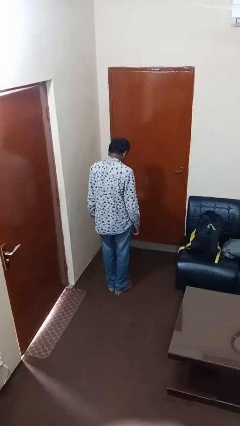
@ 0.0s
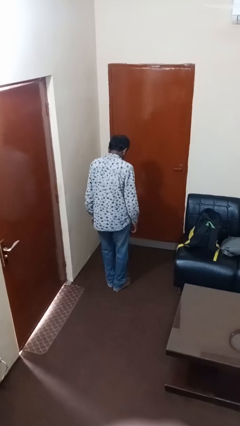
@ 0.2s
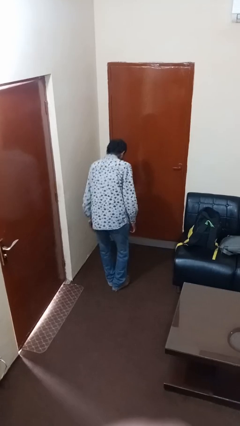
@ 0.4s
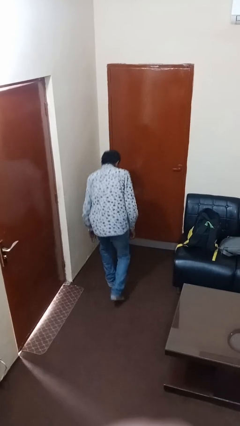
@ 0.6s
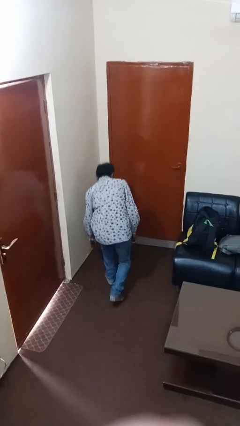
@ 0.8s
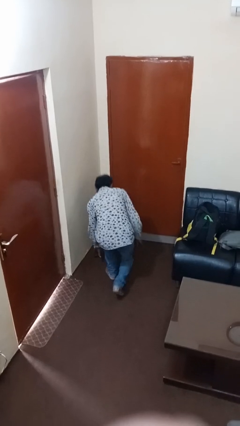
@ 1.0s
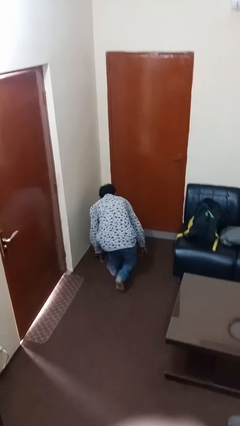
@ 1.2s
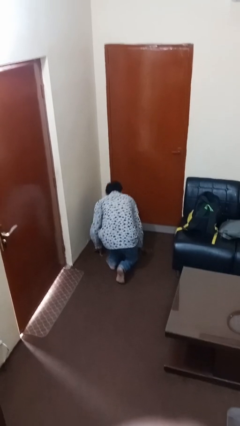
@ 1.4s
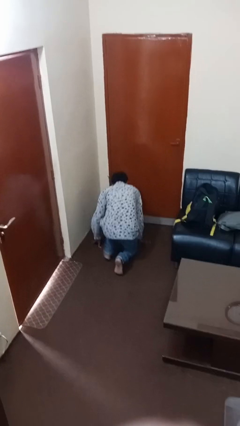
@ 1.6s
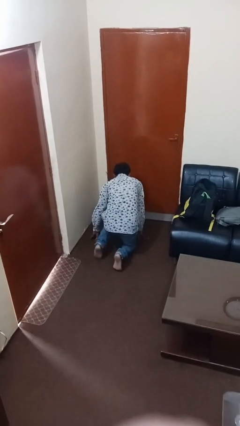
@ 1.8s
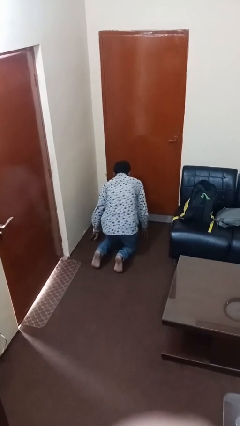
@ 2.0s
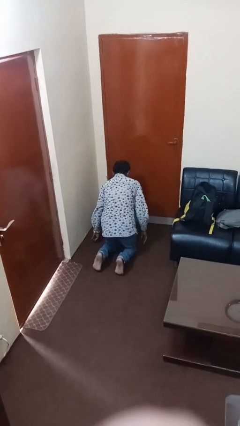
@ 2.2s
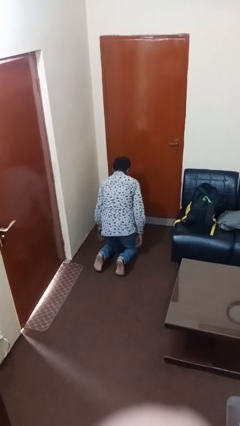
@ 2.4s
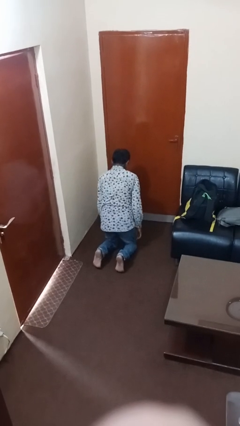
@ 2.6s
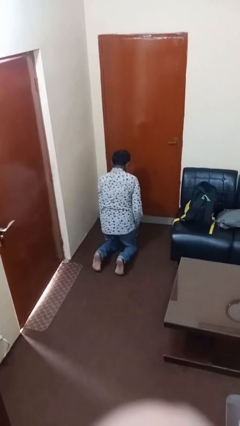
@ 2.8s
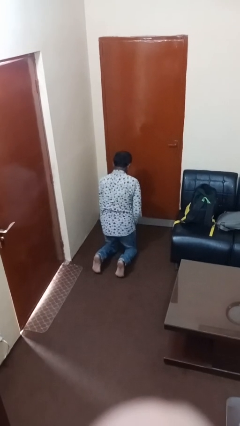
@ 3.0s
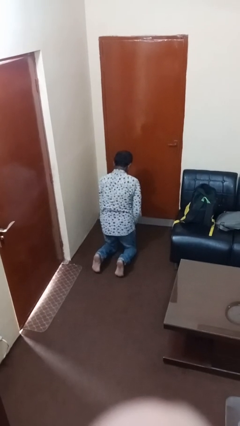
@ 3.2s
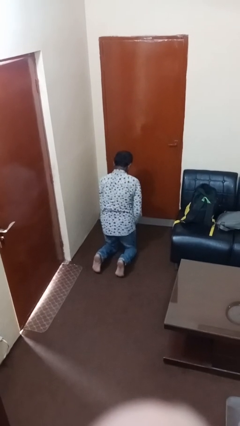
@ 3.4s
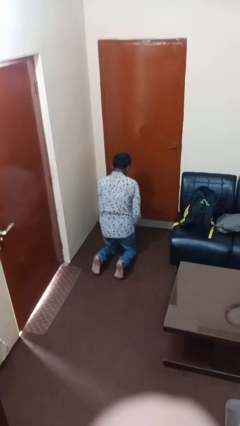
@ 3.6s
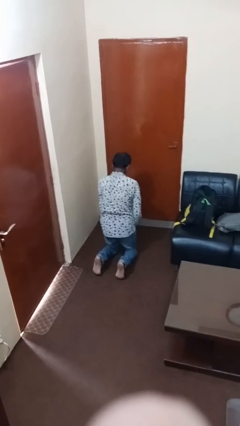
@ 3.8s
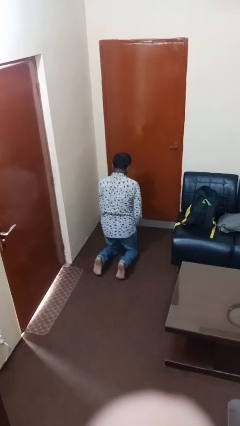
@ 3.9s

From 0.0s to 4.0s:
person kneels

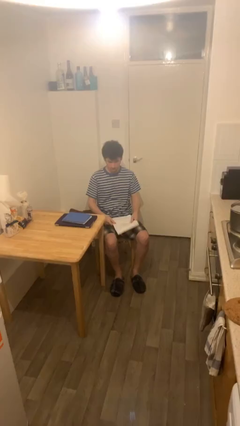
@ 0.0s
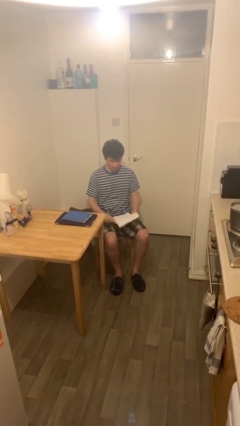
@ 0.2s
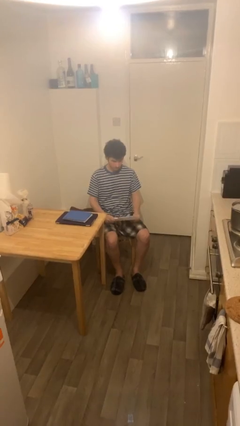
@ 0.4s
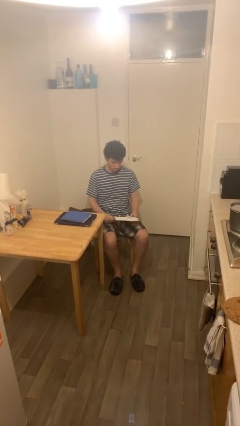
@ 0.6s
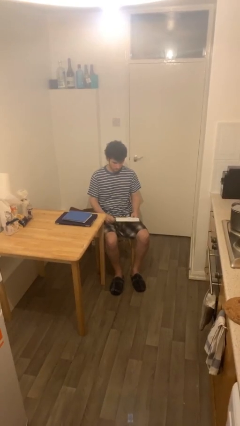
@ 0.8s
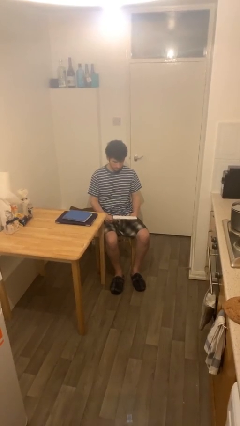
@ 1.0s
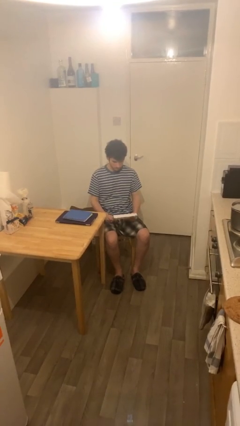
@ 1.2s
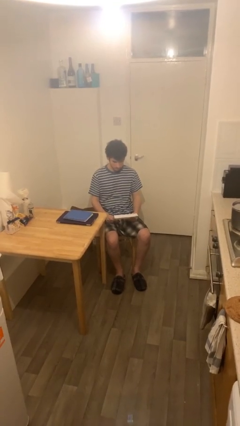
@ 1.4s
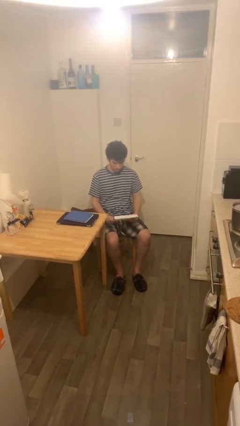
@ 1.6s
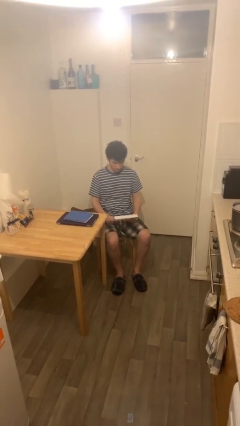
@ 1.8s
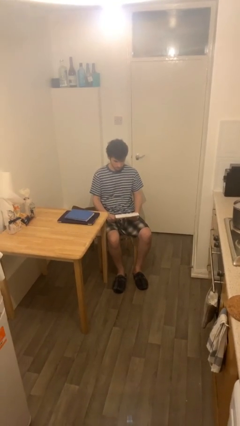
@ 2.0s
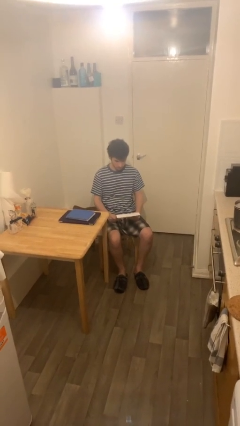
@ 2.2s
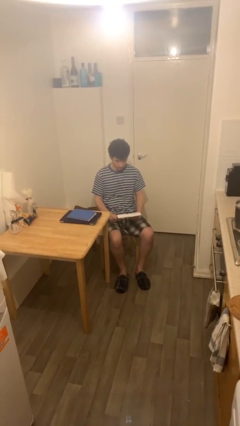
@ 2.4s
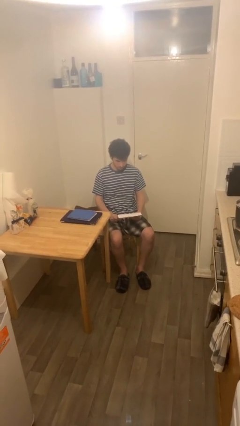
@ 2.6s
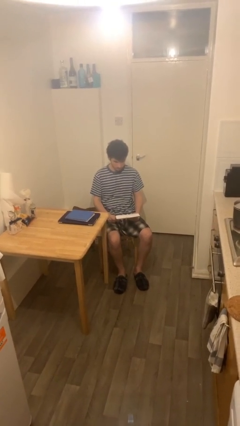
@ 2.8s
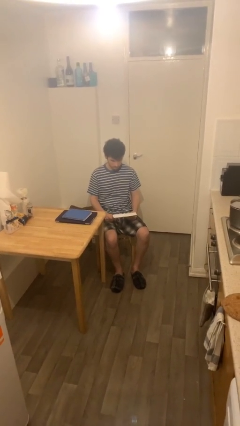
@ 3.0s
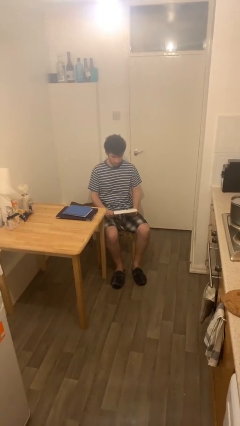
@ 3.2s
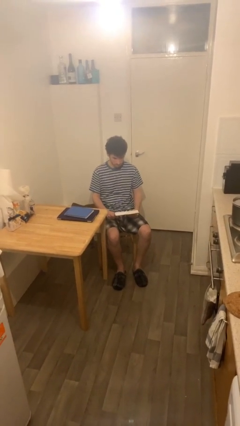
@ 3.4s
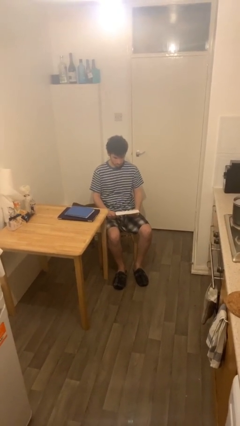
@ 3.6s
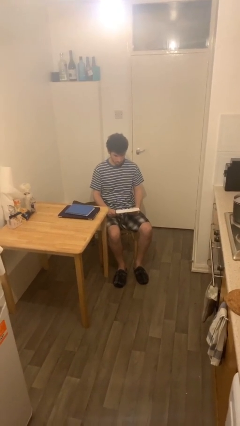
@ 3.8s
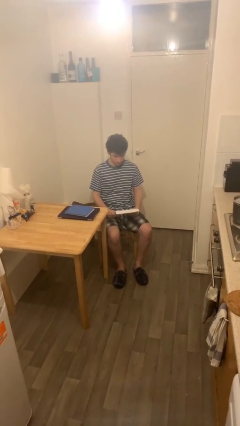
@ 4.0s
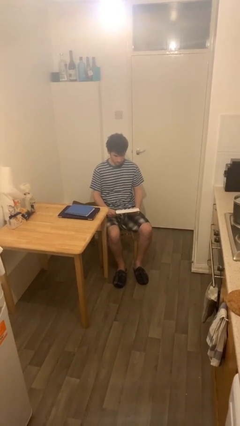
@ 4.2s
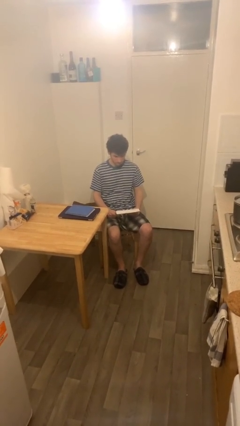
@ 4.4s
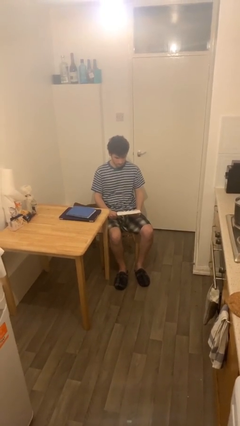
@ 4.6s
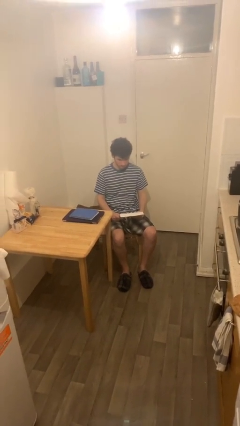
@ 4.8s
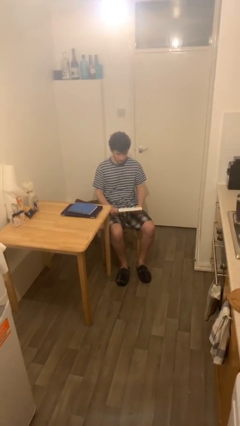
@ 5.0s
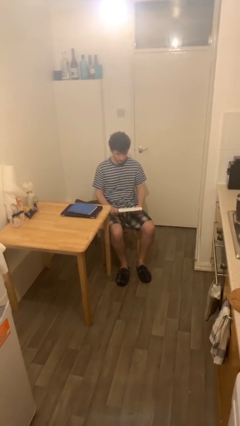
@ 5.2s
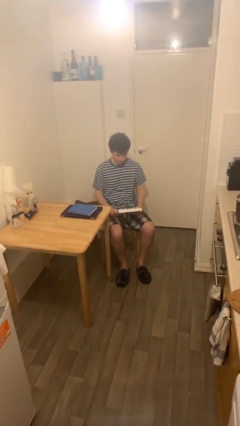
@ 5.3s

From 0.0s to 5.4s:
person reads document

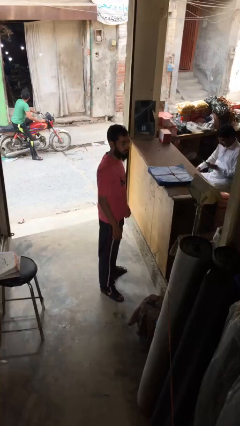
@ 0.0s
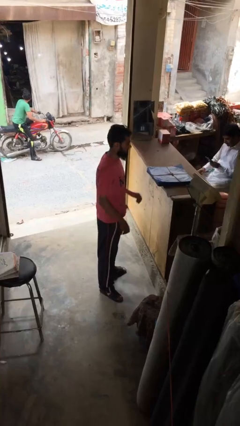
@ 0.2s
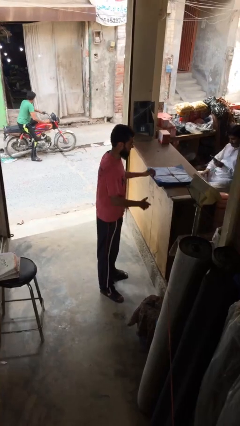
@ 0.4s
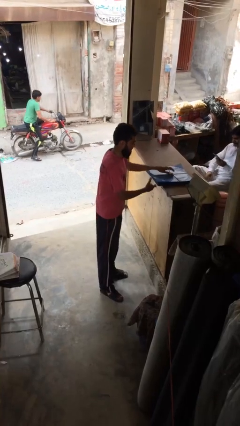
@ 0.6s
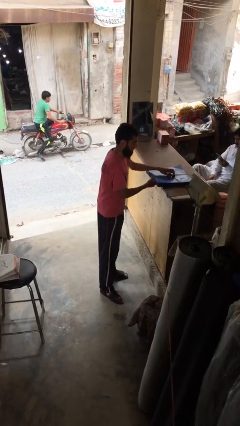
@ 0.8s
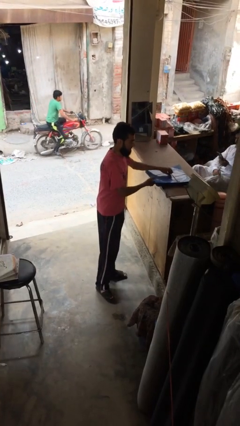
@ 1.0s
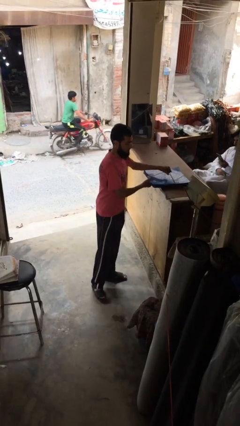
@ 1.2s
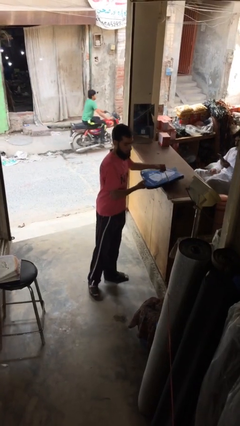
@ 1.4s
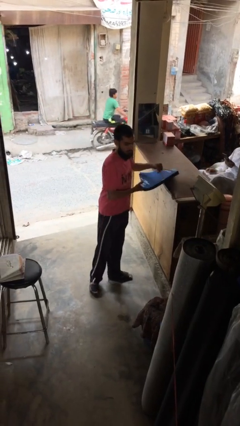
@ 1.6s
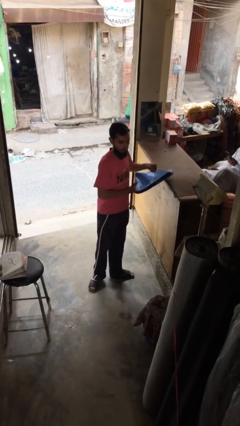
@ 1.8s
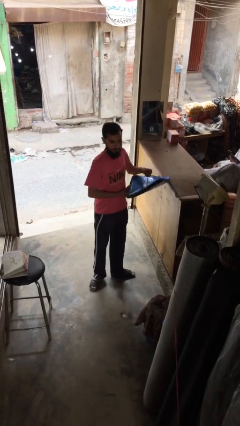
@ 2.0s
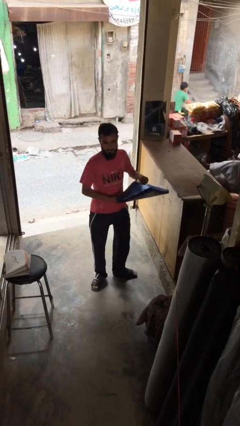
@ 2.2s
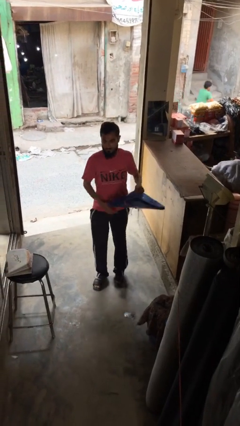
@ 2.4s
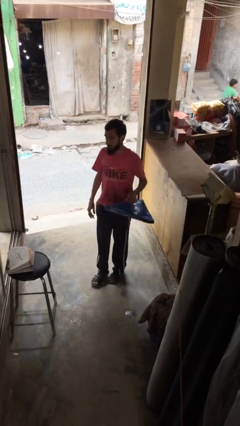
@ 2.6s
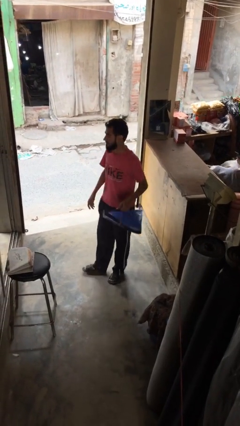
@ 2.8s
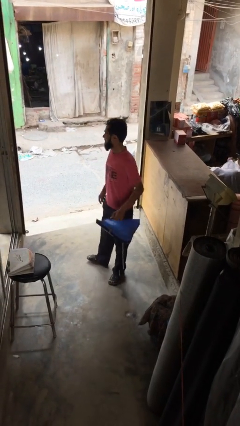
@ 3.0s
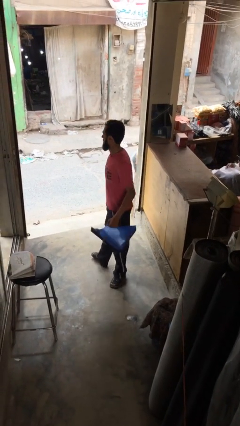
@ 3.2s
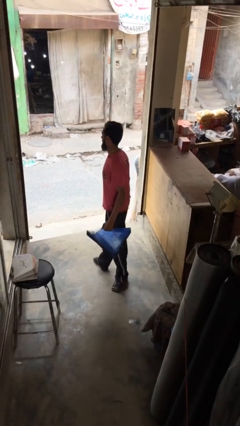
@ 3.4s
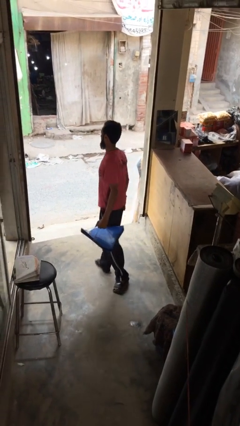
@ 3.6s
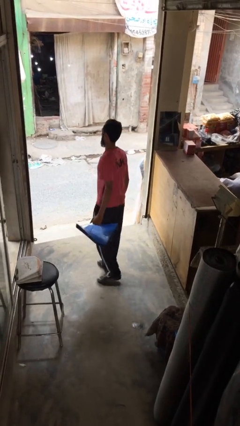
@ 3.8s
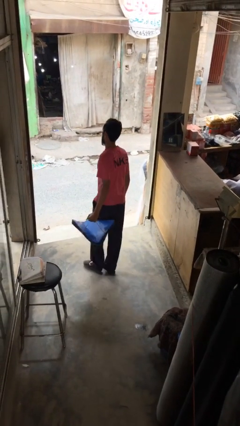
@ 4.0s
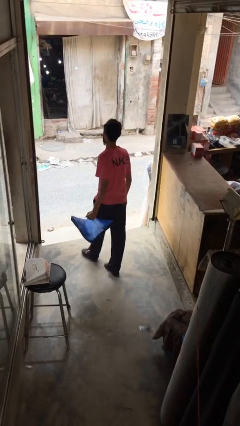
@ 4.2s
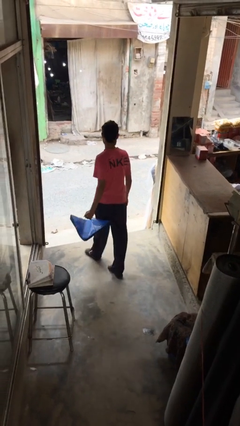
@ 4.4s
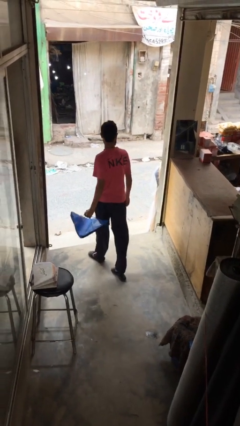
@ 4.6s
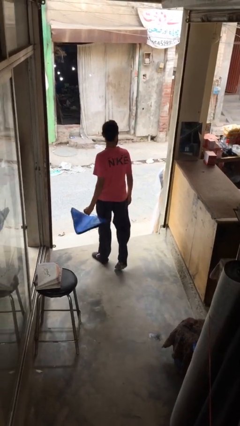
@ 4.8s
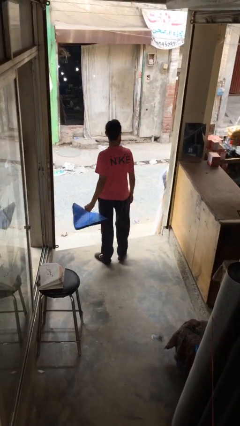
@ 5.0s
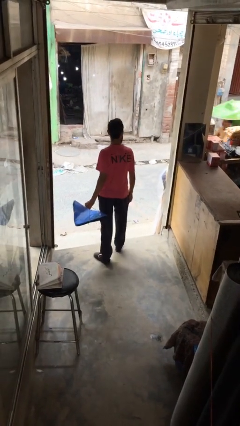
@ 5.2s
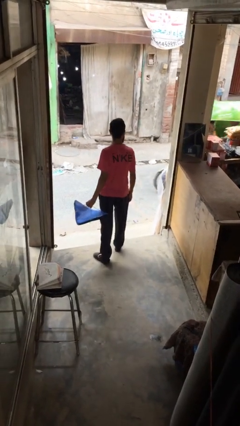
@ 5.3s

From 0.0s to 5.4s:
person steals object from person

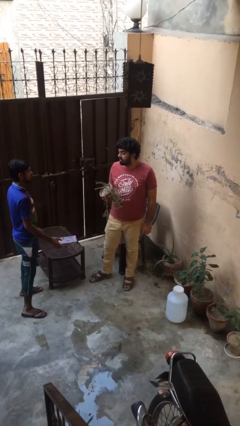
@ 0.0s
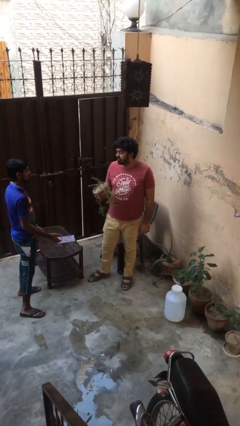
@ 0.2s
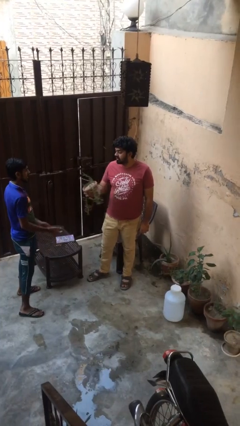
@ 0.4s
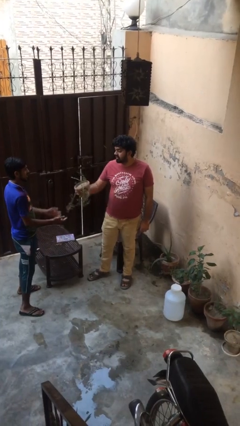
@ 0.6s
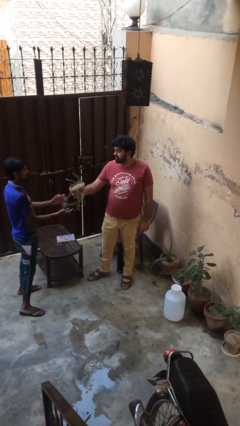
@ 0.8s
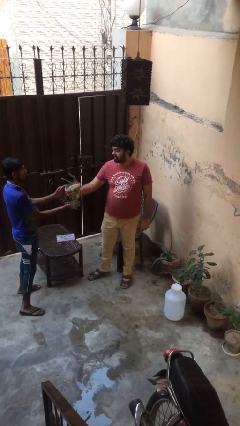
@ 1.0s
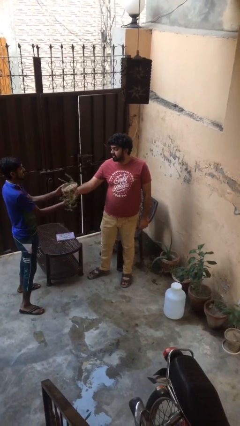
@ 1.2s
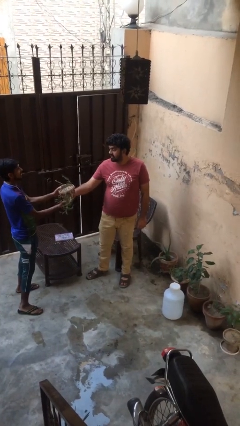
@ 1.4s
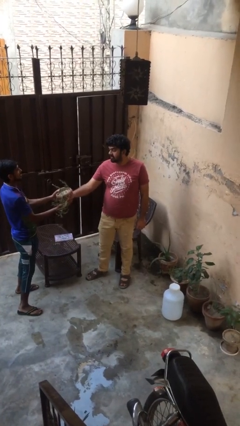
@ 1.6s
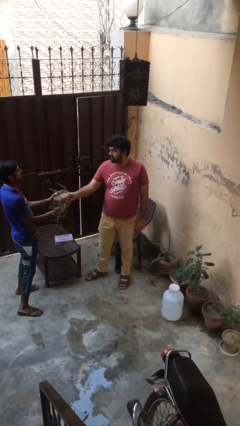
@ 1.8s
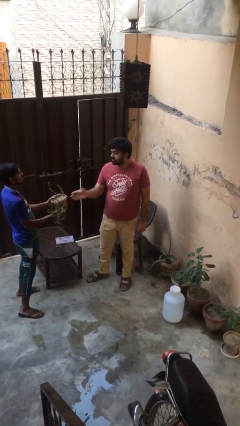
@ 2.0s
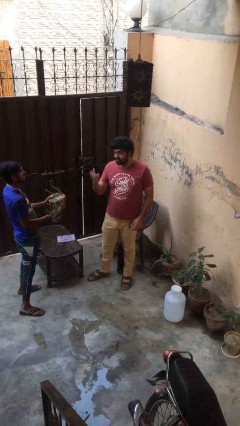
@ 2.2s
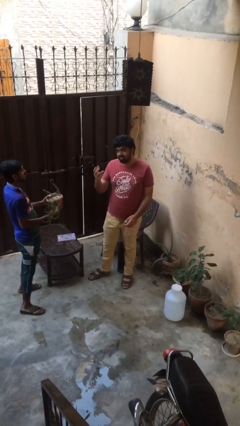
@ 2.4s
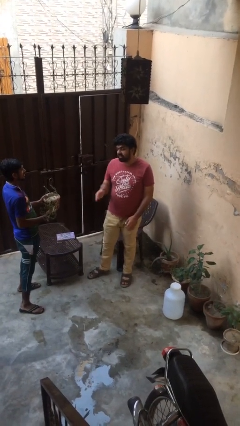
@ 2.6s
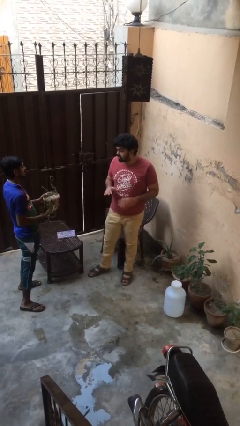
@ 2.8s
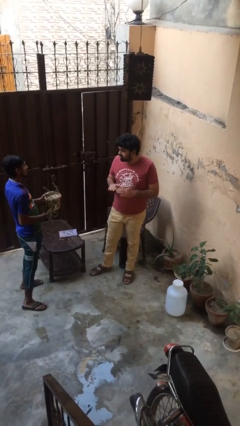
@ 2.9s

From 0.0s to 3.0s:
person transfers object to person
